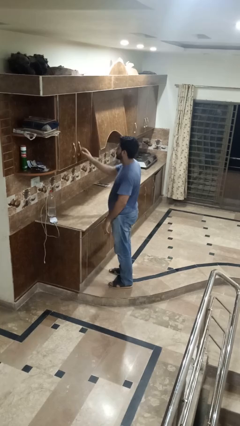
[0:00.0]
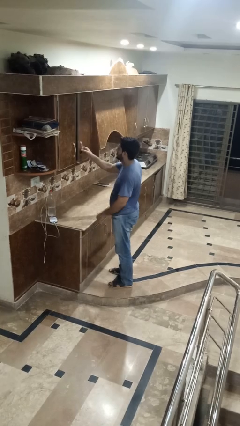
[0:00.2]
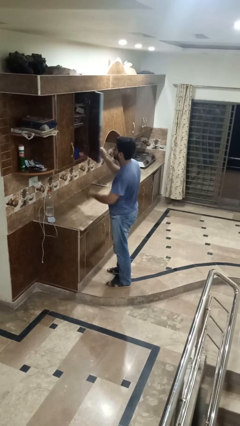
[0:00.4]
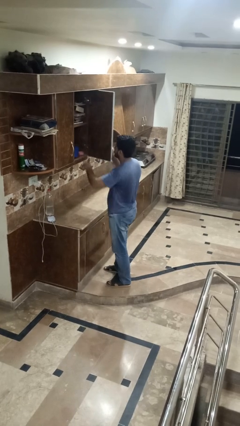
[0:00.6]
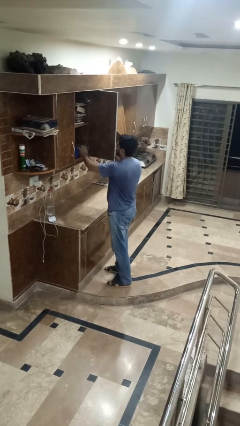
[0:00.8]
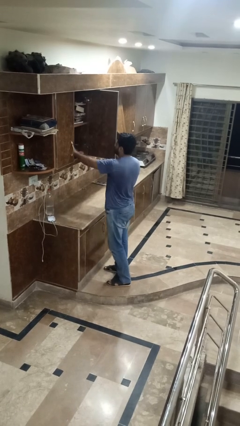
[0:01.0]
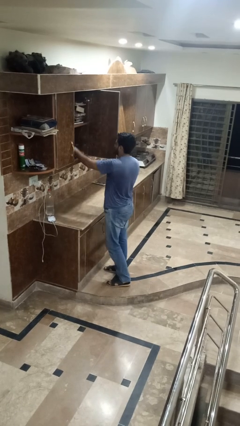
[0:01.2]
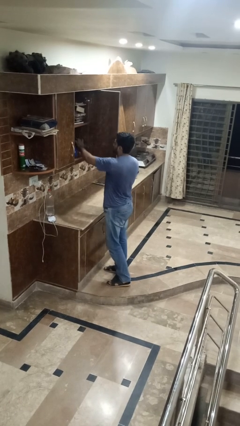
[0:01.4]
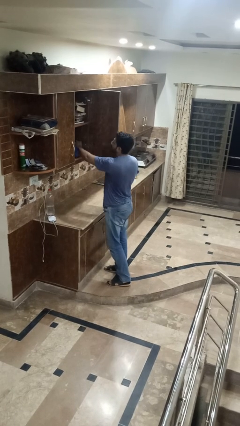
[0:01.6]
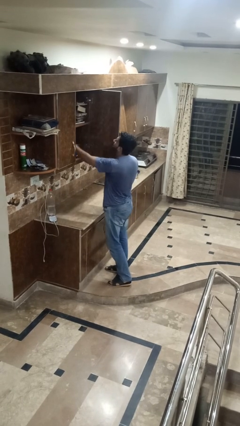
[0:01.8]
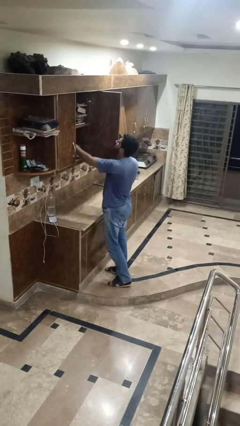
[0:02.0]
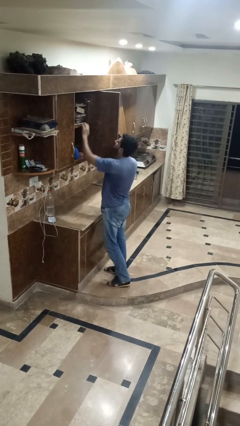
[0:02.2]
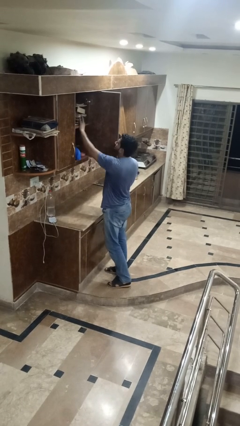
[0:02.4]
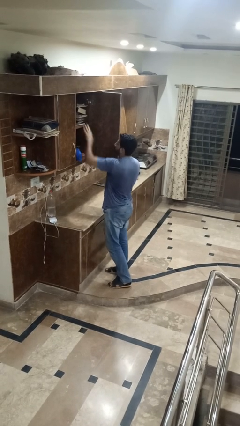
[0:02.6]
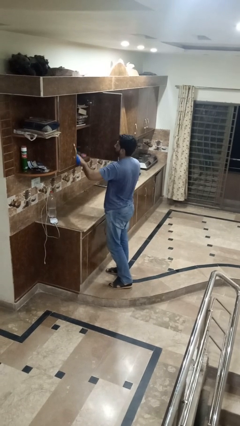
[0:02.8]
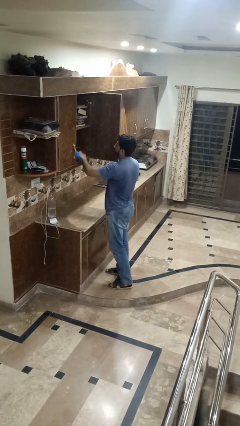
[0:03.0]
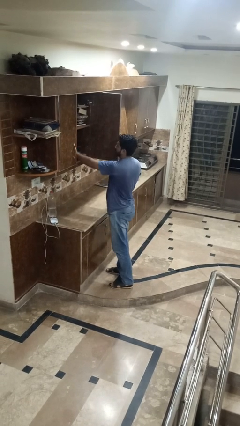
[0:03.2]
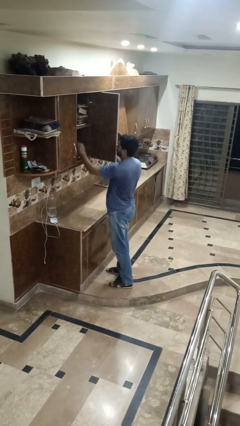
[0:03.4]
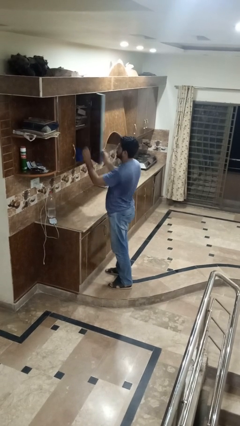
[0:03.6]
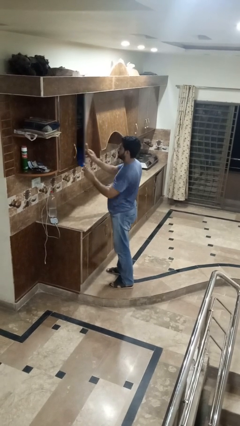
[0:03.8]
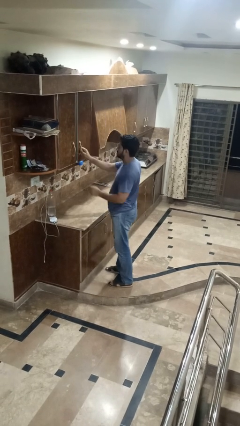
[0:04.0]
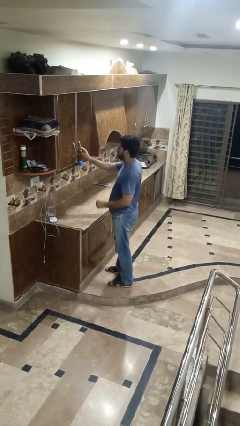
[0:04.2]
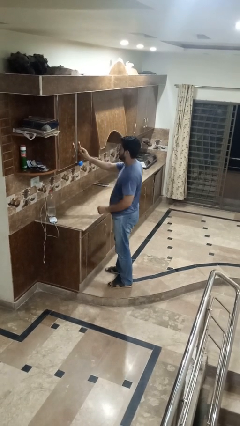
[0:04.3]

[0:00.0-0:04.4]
person searches in cabinet

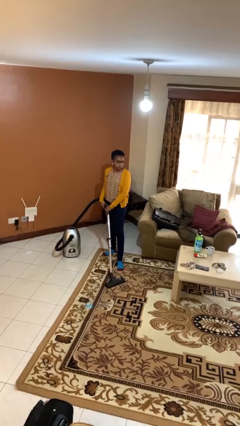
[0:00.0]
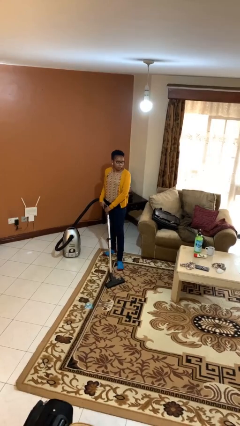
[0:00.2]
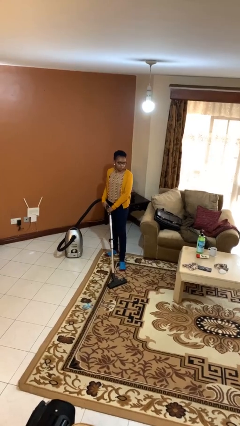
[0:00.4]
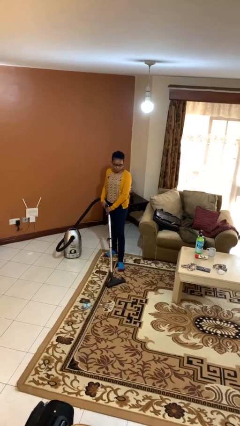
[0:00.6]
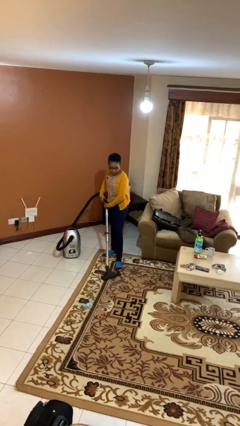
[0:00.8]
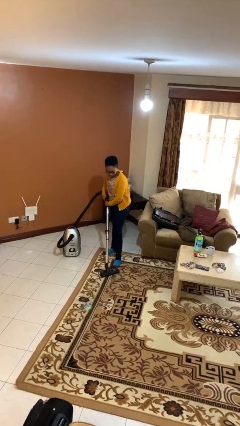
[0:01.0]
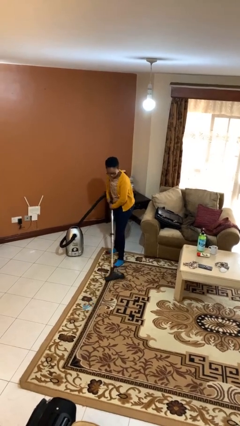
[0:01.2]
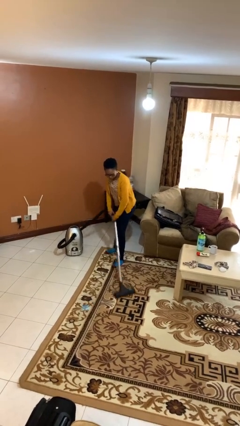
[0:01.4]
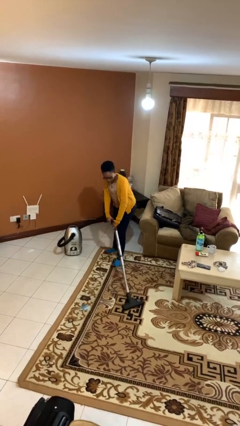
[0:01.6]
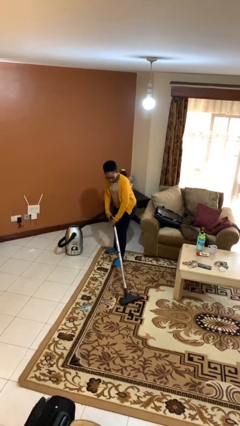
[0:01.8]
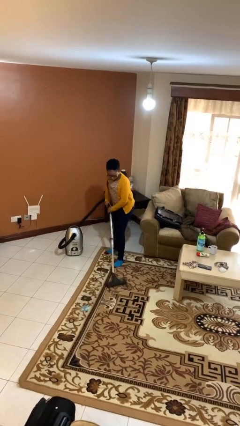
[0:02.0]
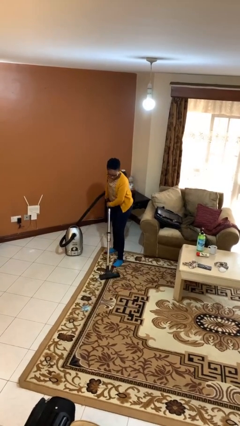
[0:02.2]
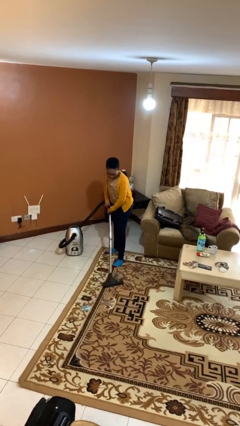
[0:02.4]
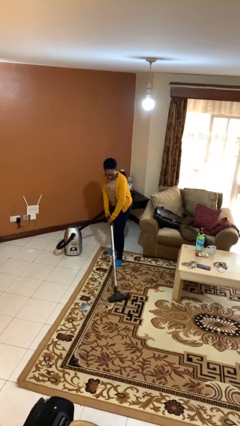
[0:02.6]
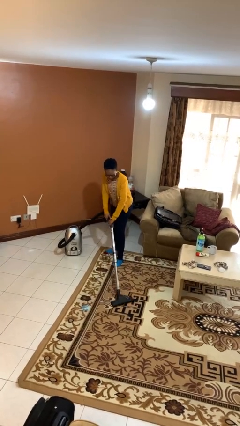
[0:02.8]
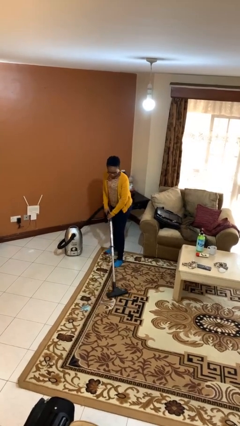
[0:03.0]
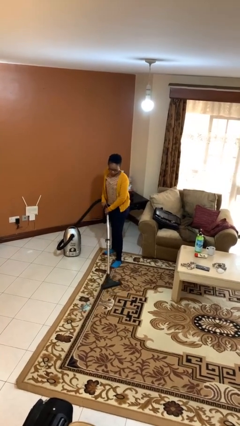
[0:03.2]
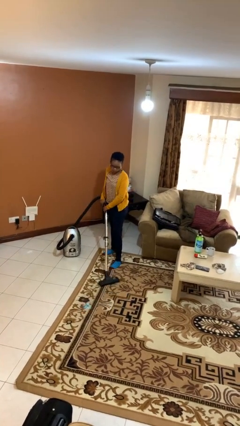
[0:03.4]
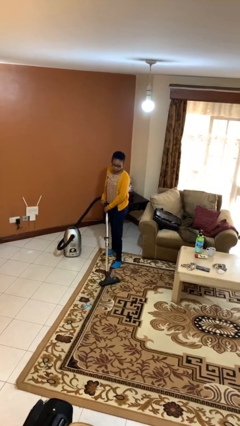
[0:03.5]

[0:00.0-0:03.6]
person vacuums carpet

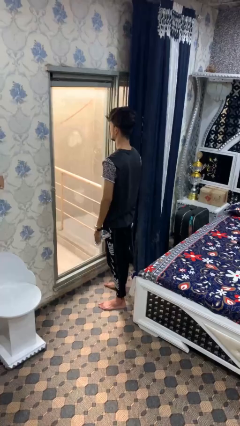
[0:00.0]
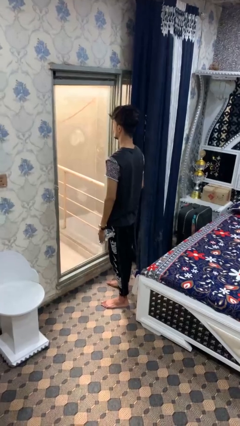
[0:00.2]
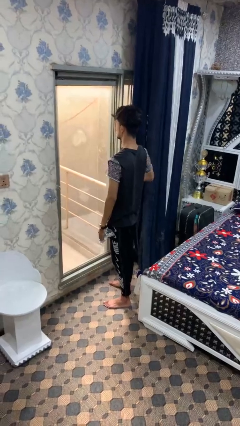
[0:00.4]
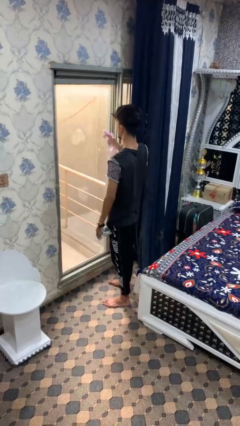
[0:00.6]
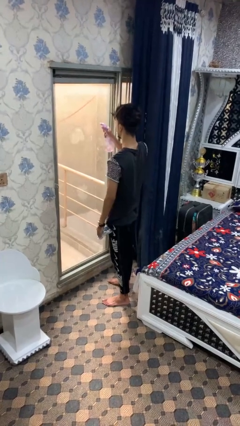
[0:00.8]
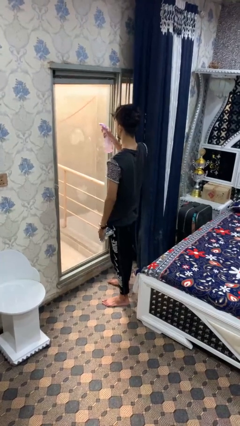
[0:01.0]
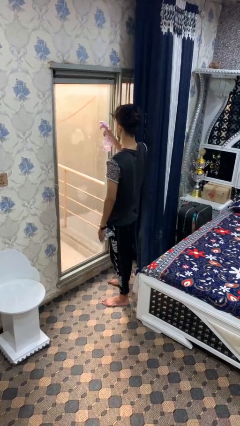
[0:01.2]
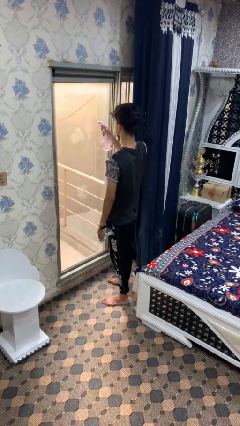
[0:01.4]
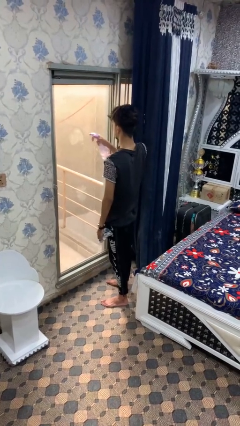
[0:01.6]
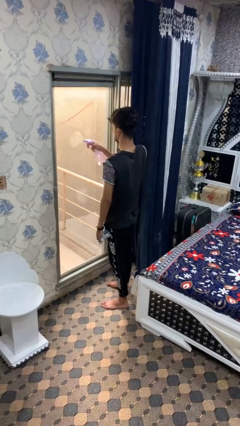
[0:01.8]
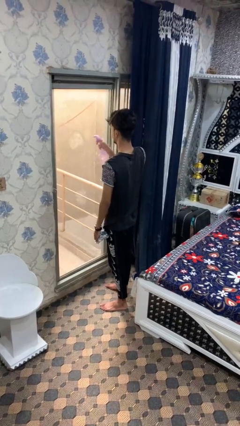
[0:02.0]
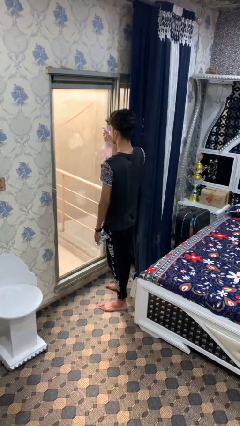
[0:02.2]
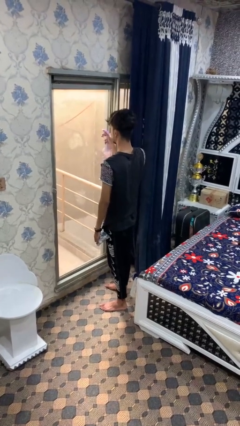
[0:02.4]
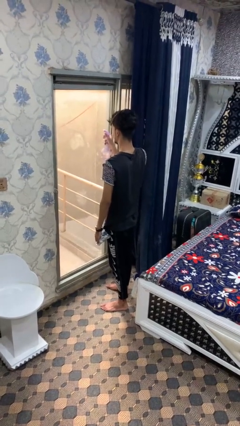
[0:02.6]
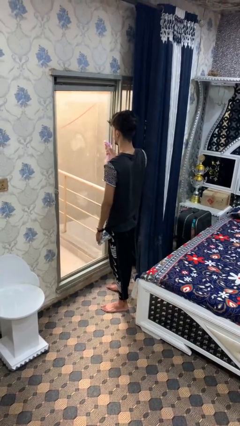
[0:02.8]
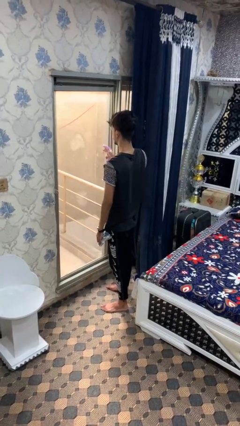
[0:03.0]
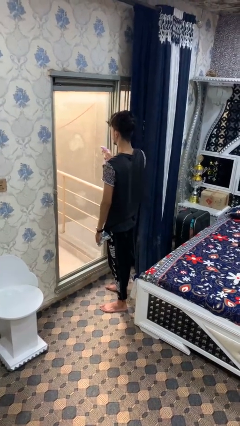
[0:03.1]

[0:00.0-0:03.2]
person sprays from bottle

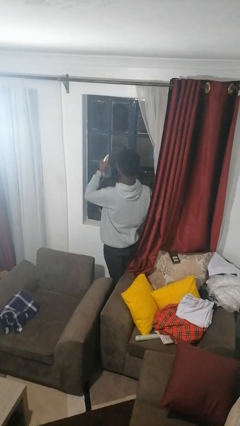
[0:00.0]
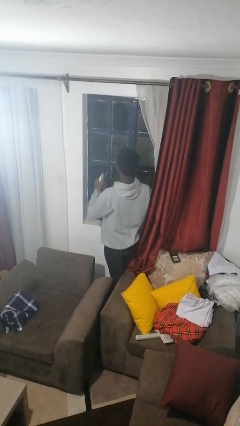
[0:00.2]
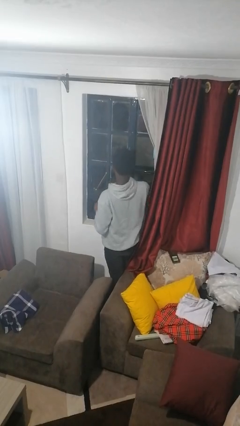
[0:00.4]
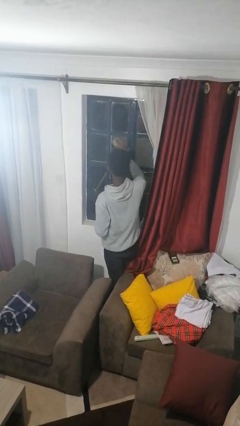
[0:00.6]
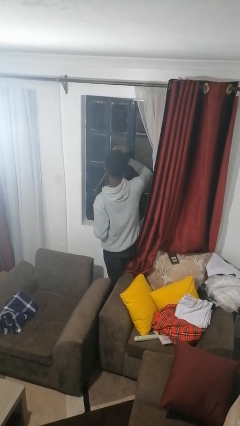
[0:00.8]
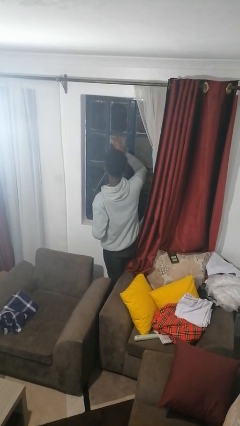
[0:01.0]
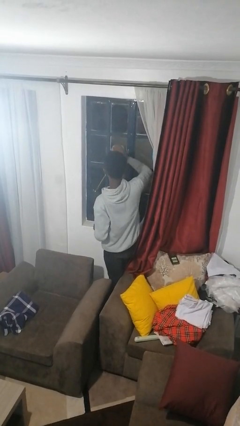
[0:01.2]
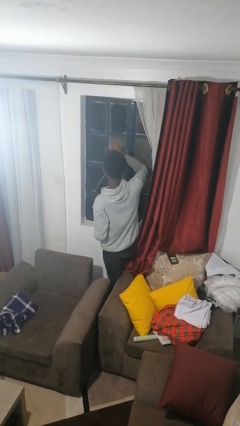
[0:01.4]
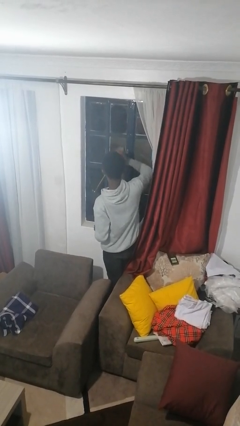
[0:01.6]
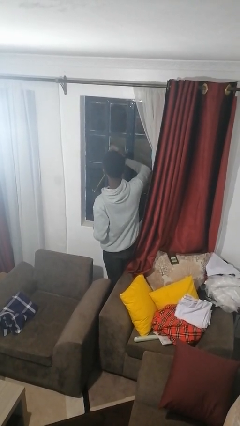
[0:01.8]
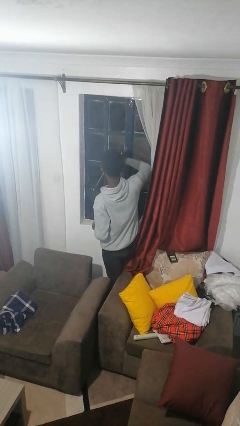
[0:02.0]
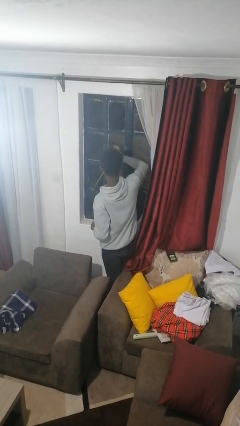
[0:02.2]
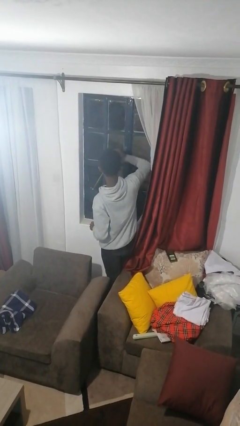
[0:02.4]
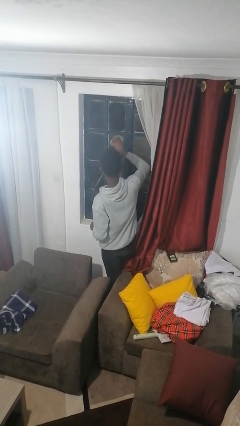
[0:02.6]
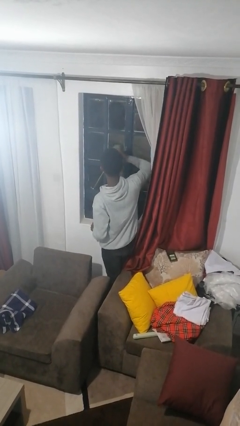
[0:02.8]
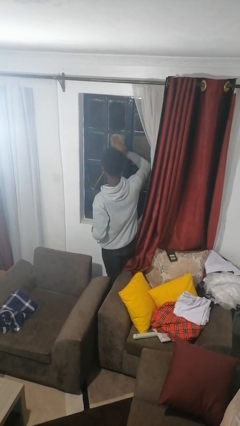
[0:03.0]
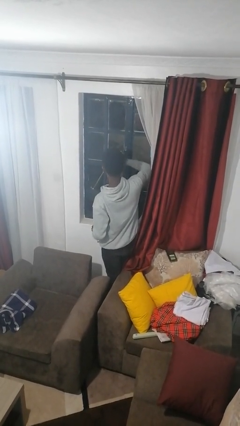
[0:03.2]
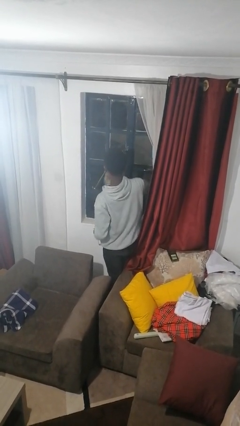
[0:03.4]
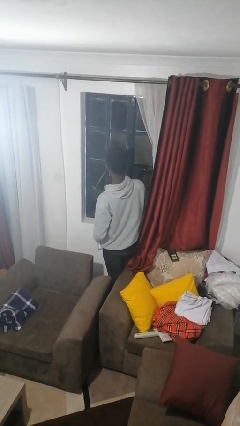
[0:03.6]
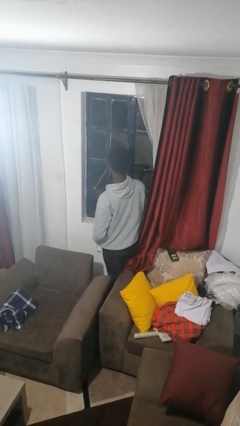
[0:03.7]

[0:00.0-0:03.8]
person washes window

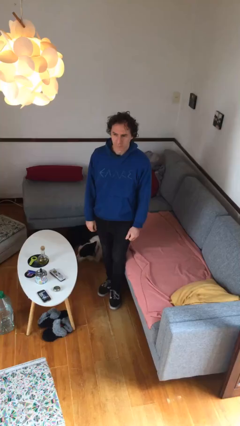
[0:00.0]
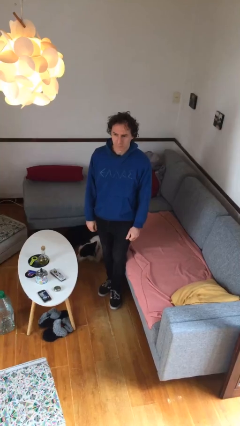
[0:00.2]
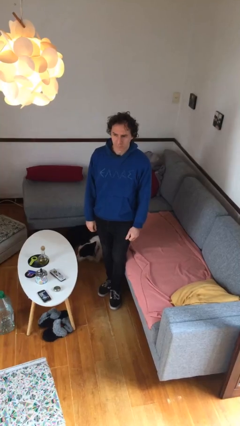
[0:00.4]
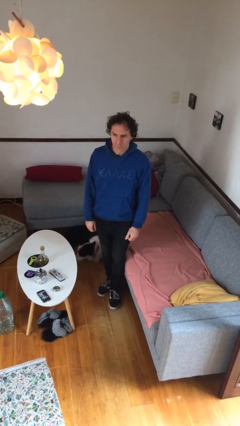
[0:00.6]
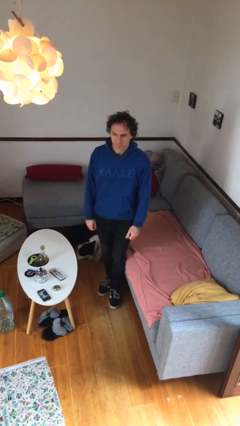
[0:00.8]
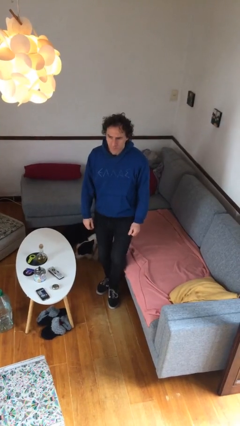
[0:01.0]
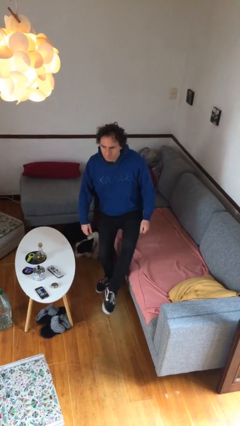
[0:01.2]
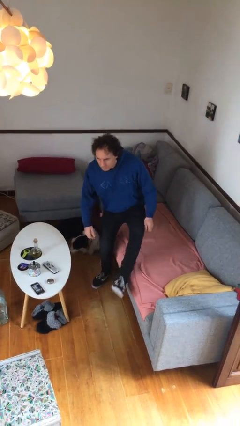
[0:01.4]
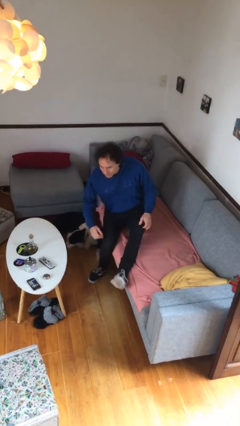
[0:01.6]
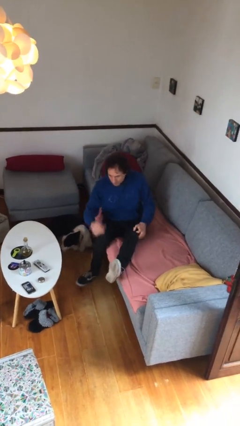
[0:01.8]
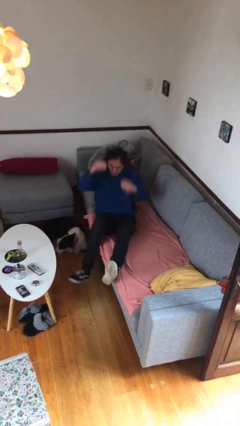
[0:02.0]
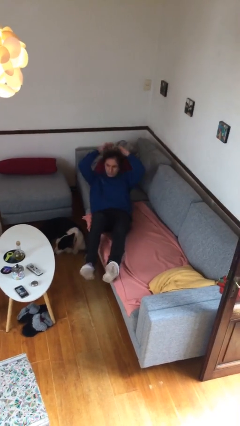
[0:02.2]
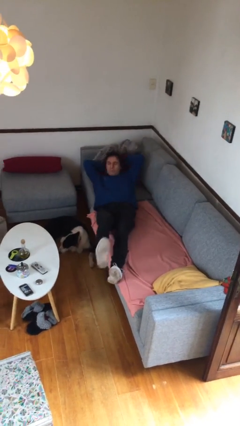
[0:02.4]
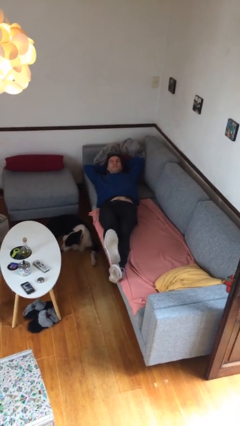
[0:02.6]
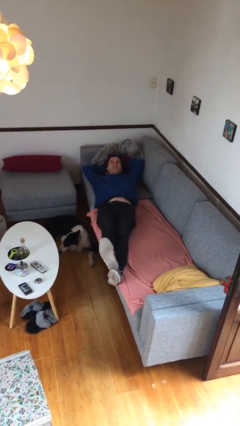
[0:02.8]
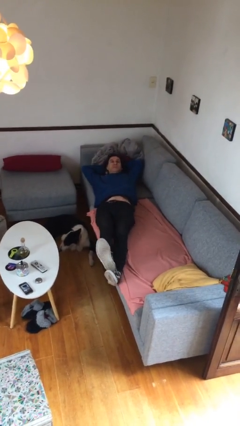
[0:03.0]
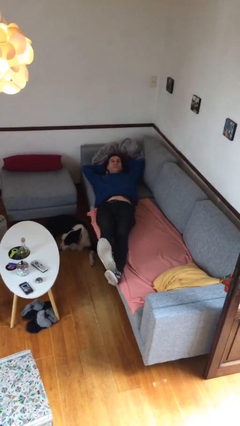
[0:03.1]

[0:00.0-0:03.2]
person lies down on couch
